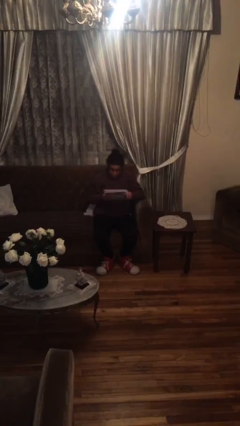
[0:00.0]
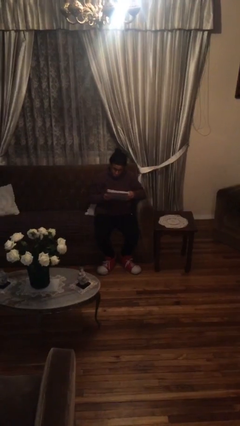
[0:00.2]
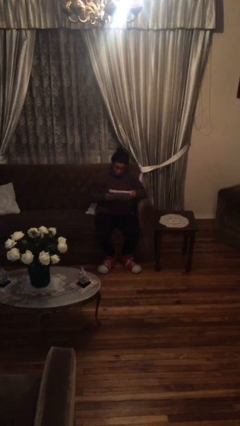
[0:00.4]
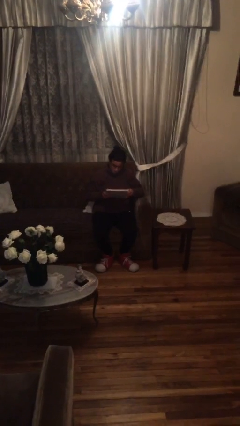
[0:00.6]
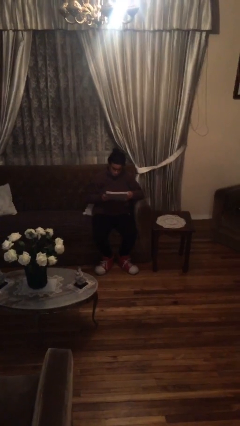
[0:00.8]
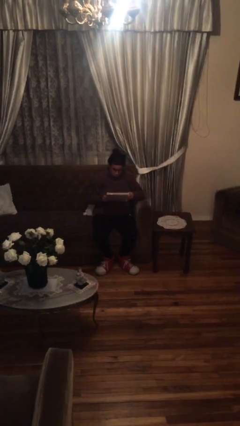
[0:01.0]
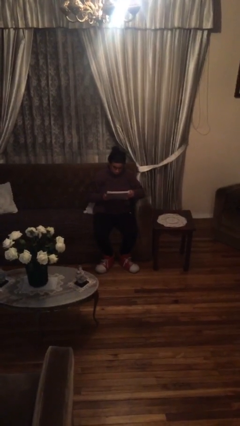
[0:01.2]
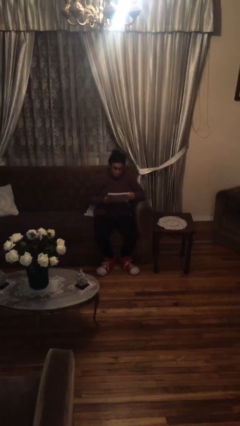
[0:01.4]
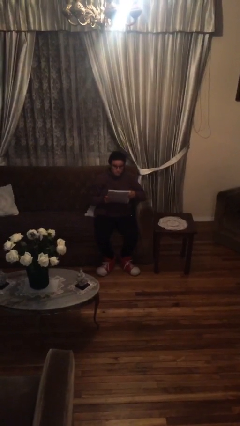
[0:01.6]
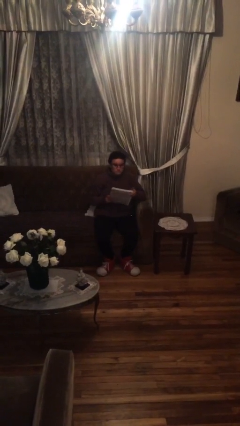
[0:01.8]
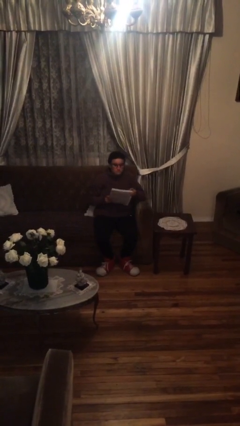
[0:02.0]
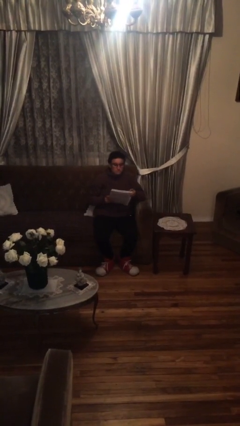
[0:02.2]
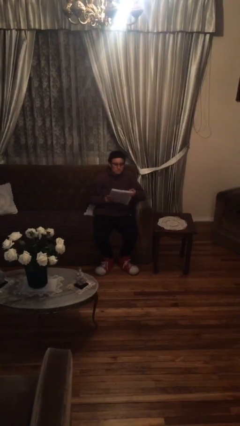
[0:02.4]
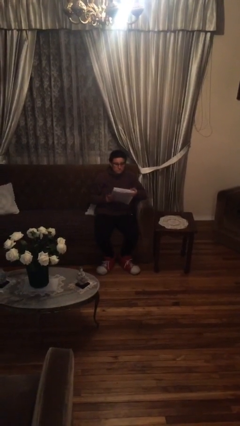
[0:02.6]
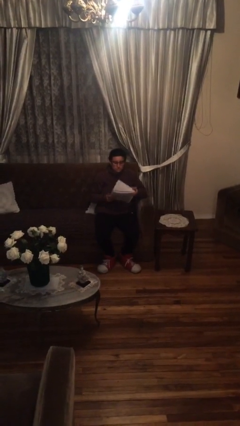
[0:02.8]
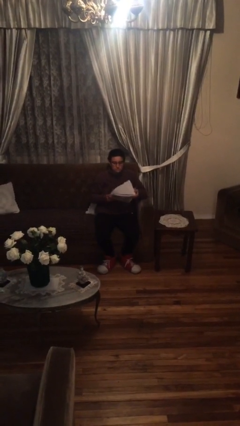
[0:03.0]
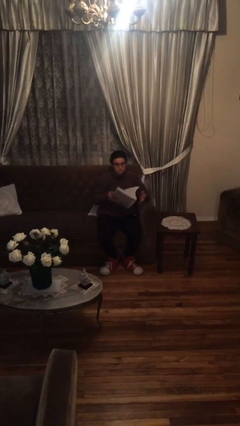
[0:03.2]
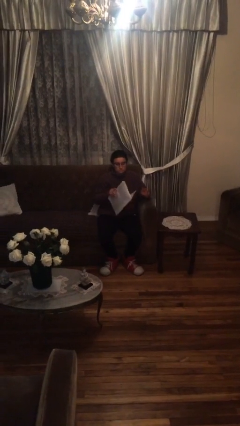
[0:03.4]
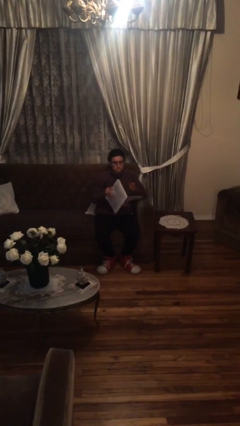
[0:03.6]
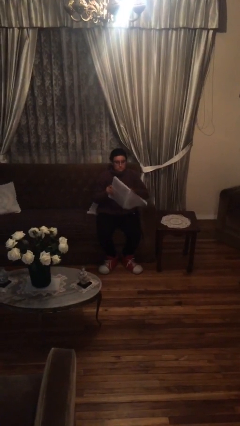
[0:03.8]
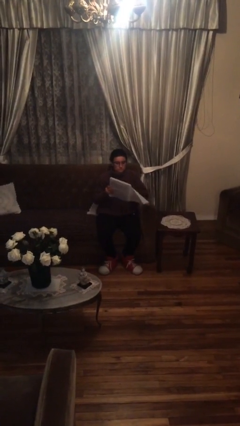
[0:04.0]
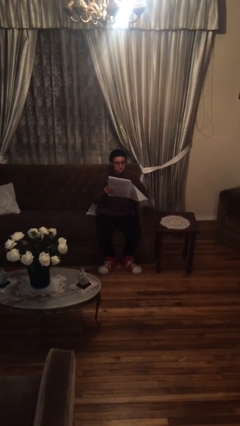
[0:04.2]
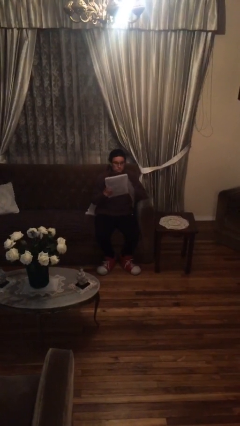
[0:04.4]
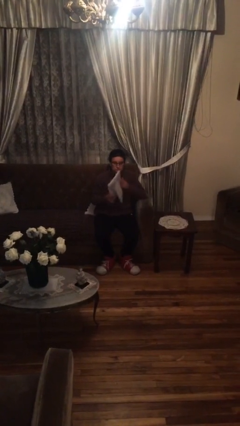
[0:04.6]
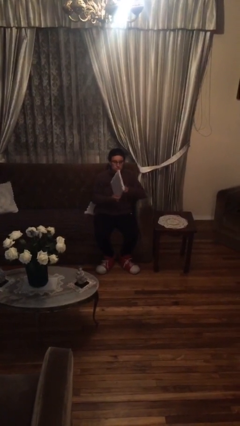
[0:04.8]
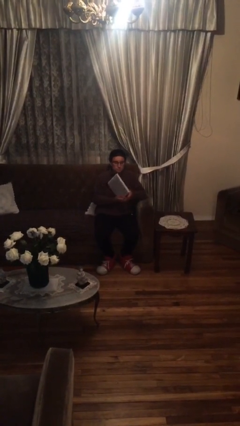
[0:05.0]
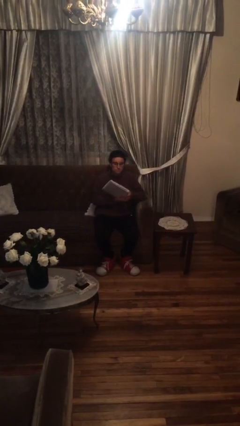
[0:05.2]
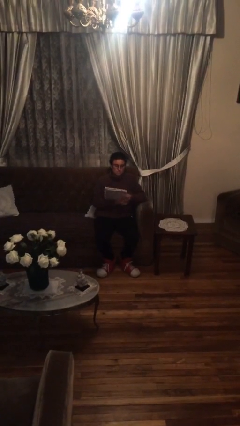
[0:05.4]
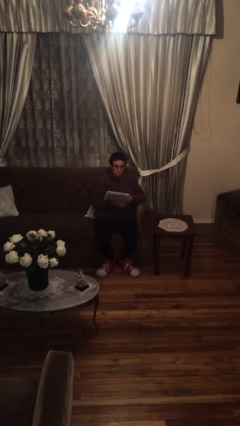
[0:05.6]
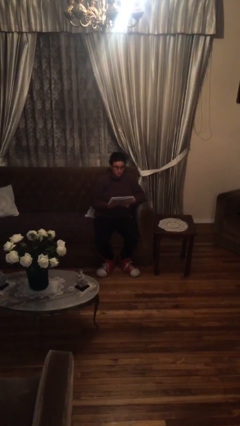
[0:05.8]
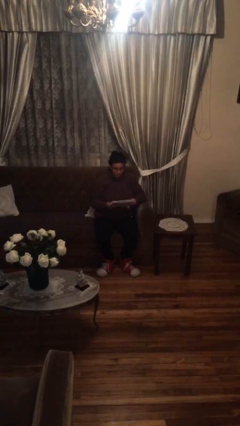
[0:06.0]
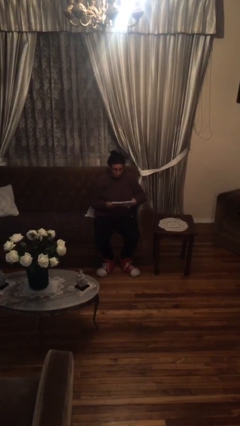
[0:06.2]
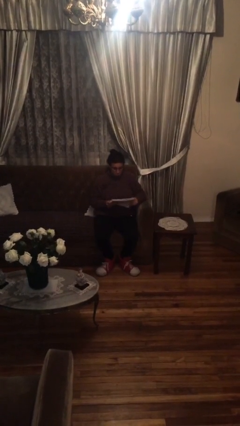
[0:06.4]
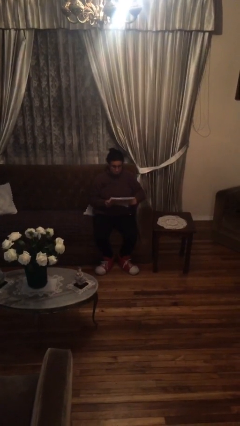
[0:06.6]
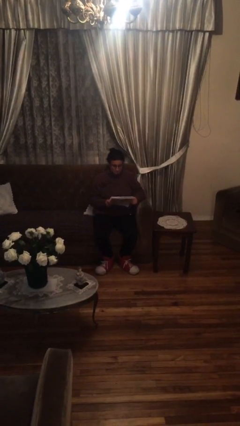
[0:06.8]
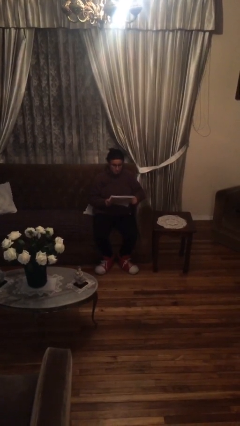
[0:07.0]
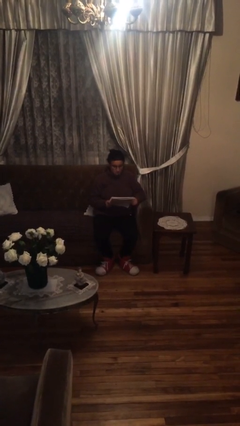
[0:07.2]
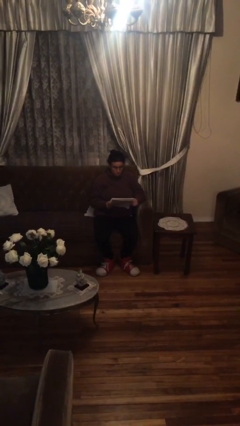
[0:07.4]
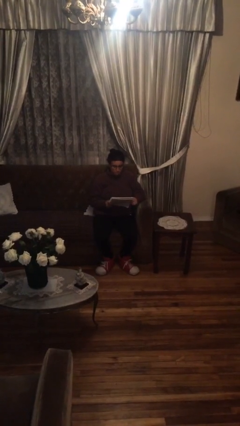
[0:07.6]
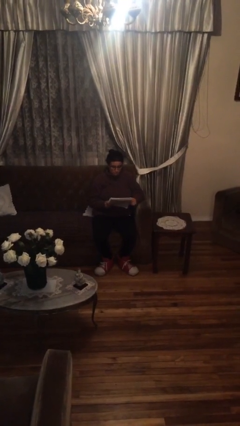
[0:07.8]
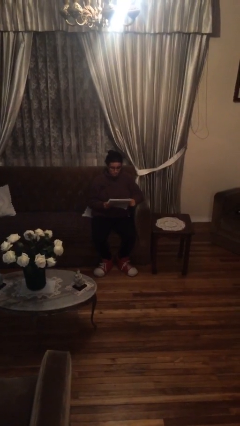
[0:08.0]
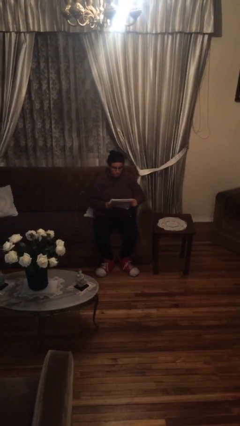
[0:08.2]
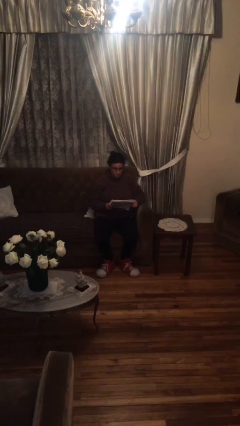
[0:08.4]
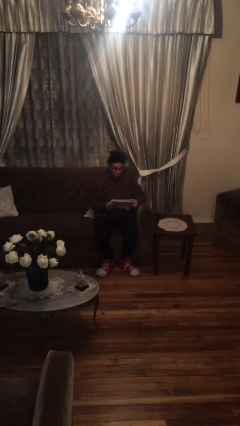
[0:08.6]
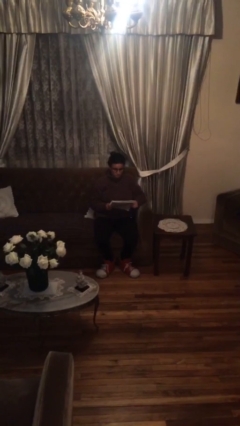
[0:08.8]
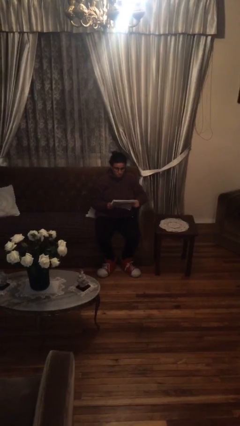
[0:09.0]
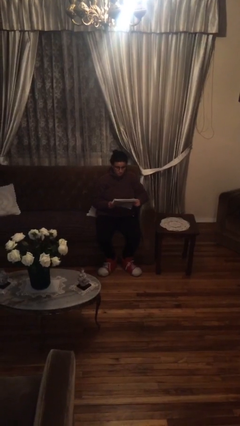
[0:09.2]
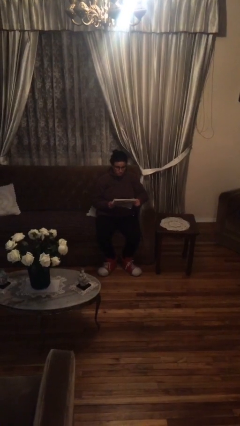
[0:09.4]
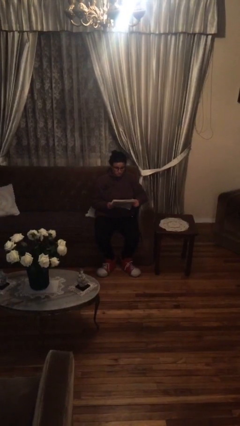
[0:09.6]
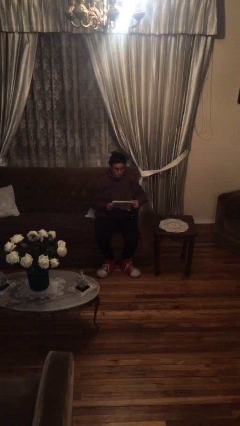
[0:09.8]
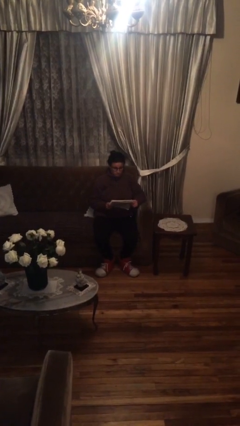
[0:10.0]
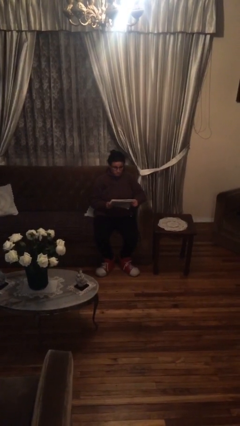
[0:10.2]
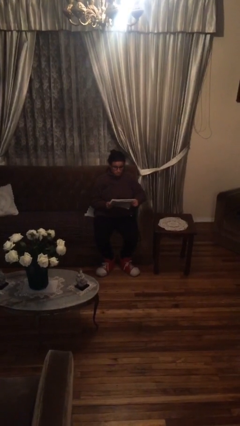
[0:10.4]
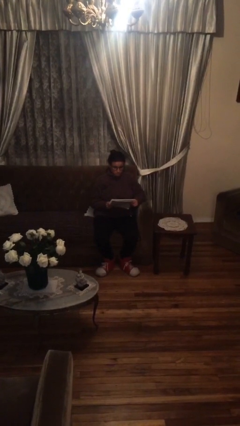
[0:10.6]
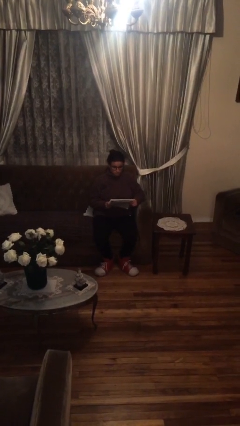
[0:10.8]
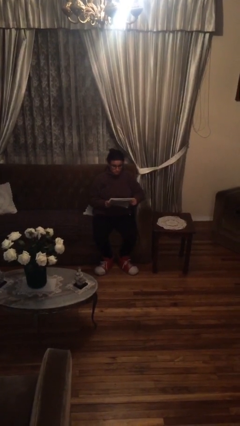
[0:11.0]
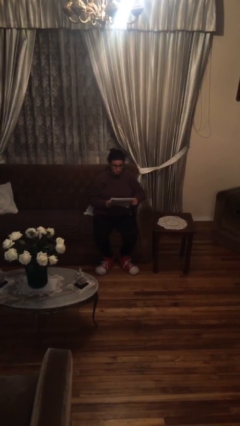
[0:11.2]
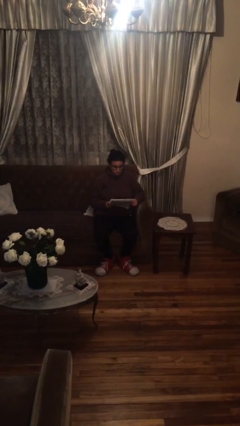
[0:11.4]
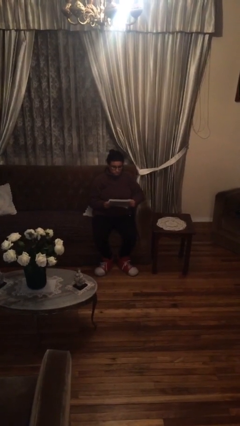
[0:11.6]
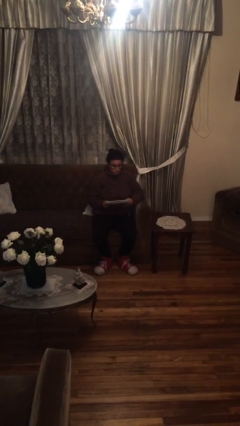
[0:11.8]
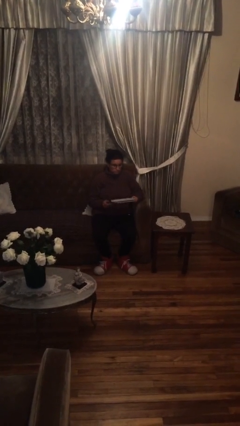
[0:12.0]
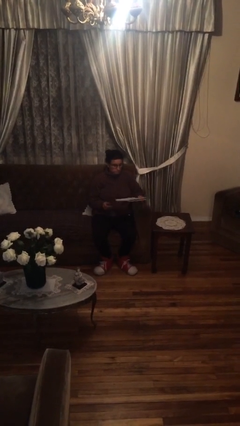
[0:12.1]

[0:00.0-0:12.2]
person reads document

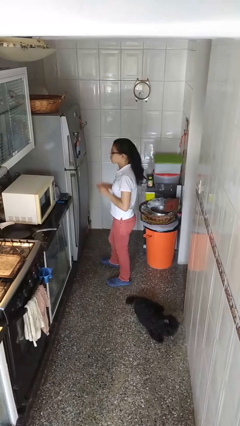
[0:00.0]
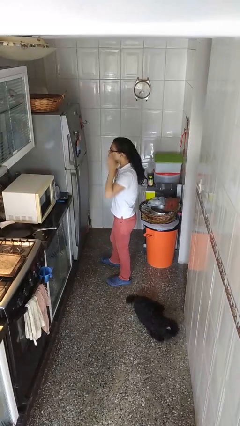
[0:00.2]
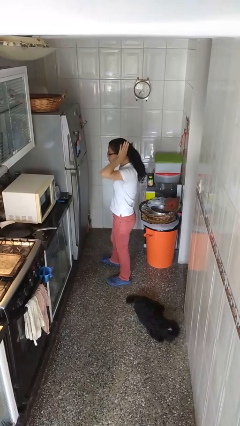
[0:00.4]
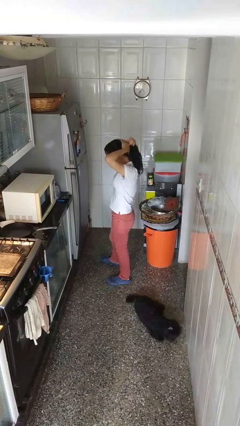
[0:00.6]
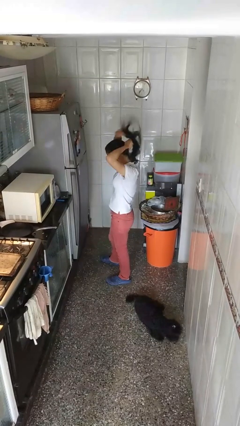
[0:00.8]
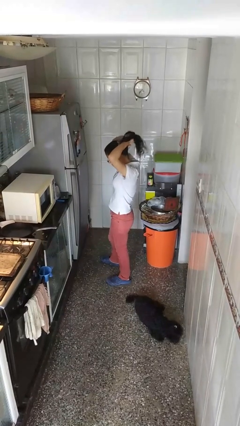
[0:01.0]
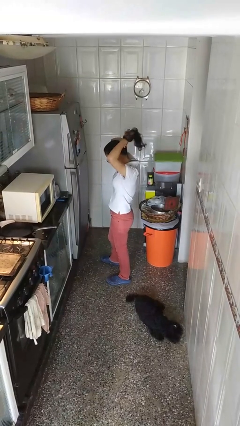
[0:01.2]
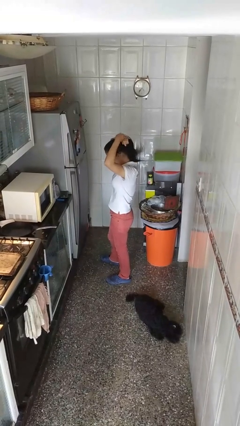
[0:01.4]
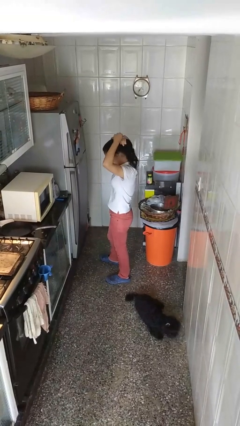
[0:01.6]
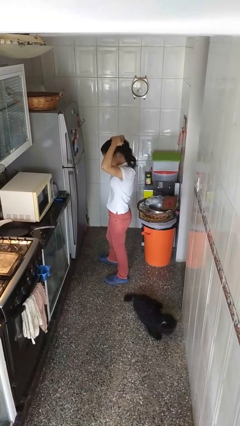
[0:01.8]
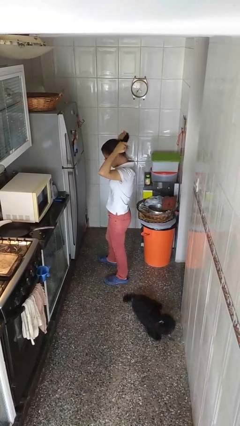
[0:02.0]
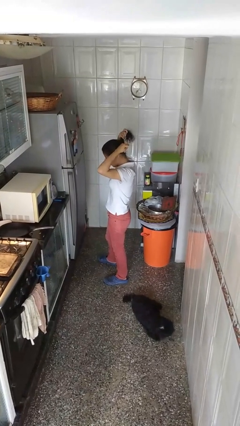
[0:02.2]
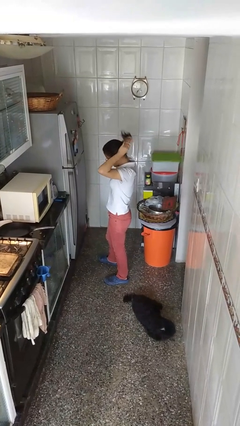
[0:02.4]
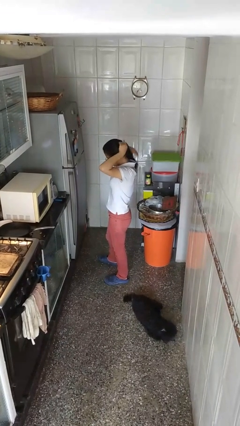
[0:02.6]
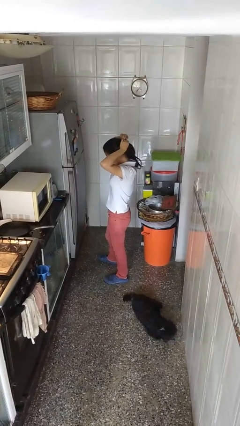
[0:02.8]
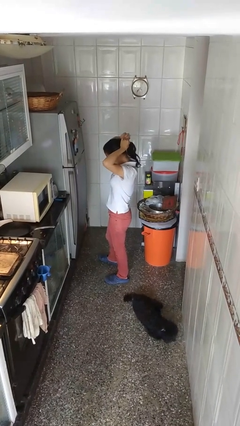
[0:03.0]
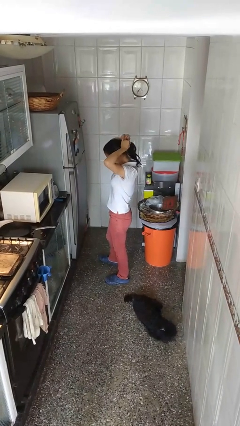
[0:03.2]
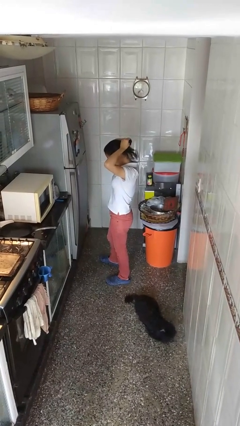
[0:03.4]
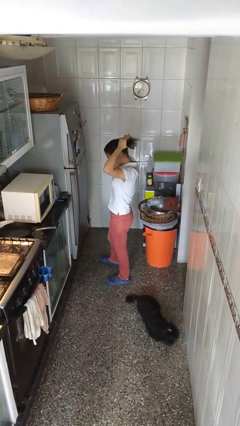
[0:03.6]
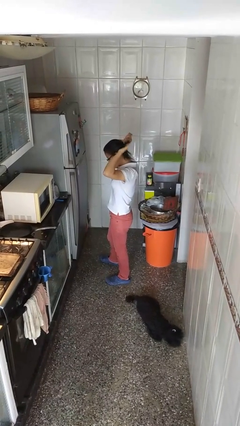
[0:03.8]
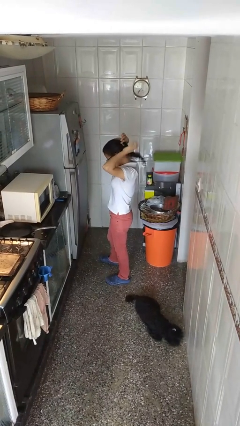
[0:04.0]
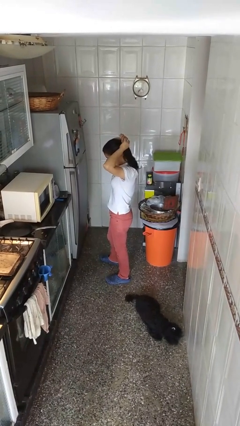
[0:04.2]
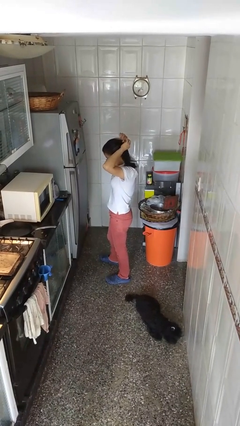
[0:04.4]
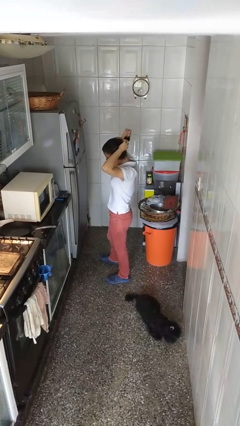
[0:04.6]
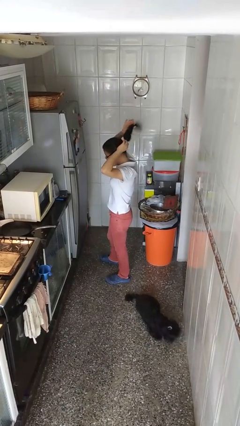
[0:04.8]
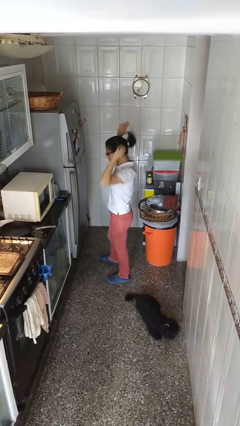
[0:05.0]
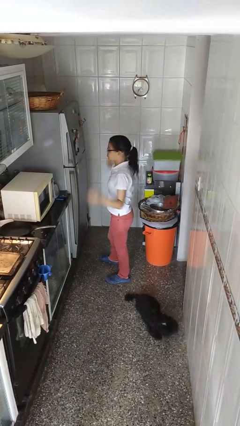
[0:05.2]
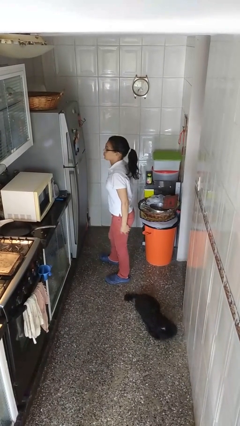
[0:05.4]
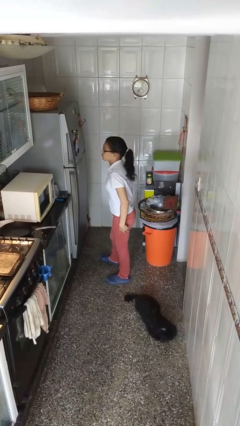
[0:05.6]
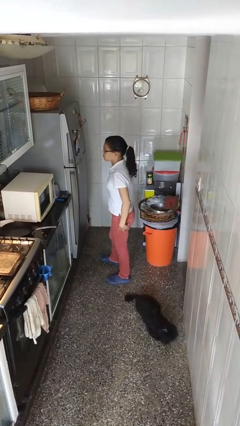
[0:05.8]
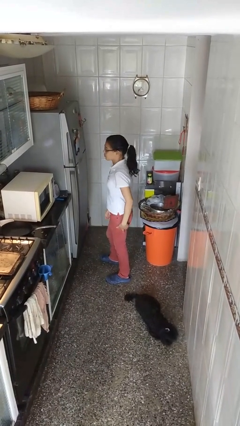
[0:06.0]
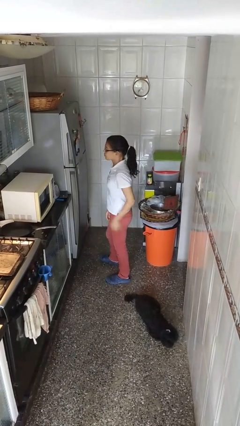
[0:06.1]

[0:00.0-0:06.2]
person puts hair in ponytail
